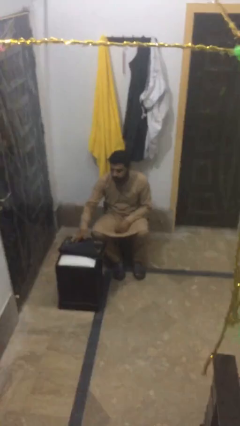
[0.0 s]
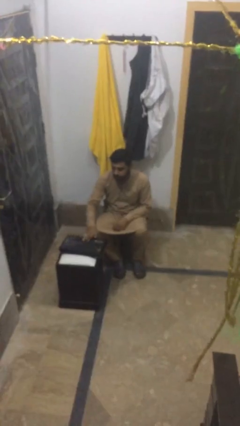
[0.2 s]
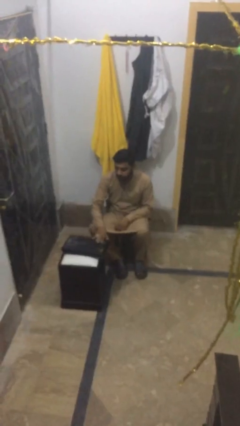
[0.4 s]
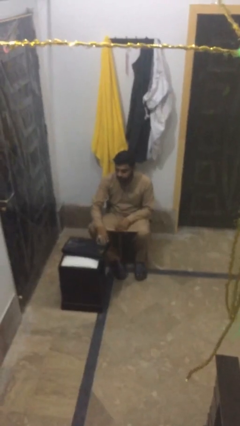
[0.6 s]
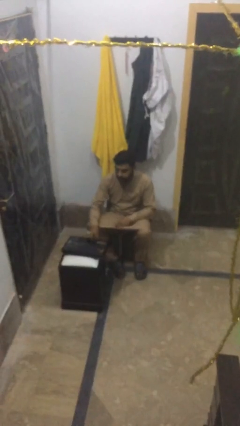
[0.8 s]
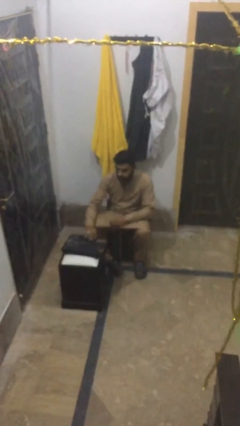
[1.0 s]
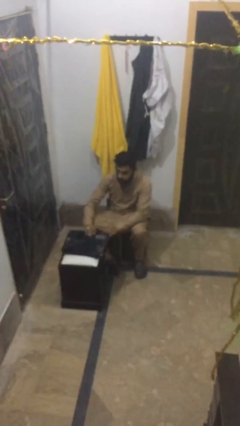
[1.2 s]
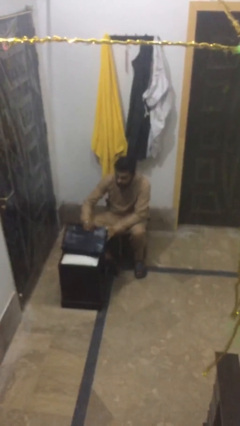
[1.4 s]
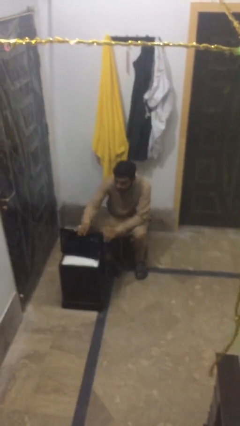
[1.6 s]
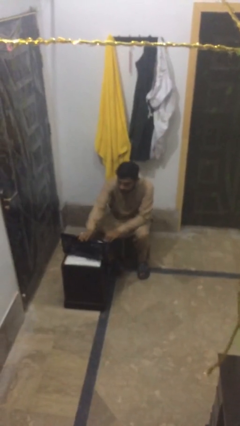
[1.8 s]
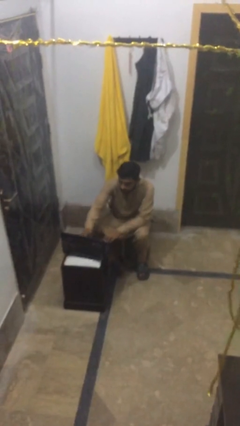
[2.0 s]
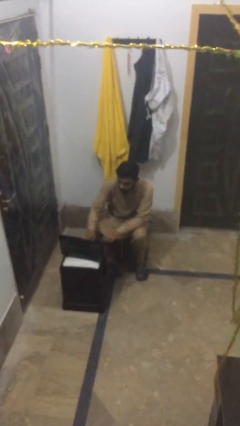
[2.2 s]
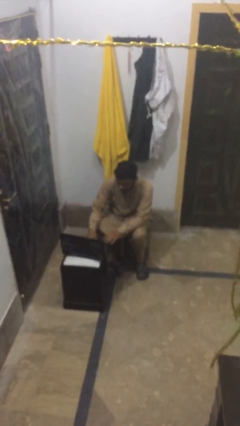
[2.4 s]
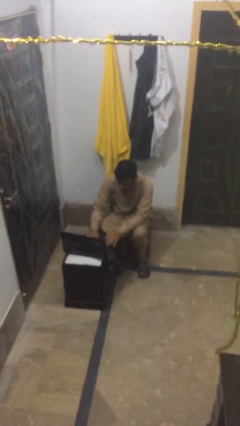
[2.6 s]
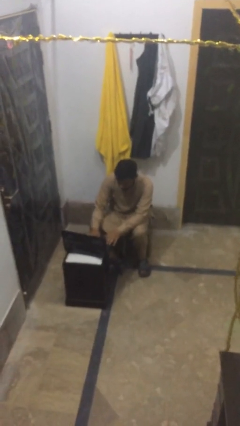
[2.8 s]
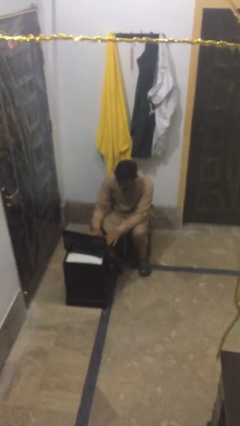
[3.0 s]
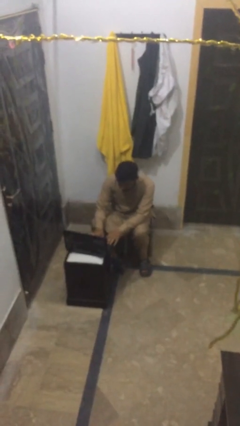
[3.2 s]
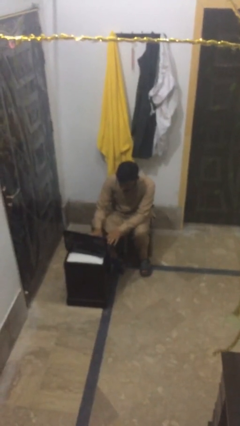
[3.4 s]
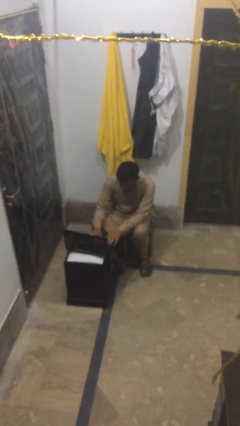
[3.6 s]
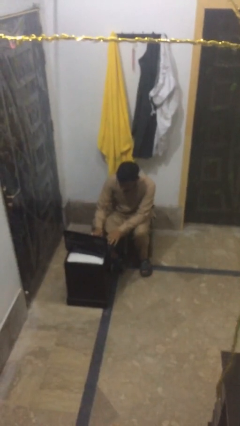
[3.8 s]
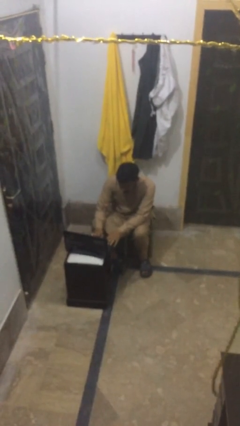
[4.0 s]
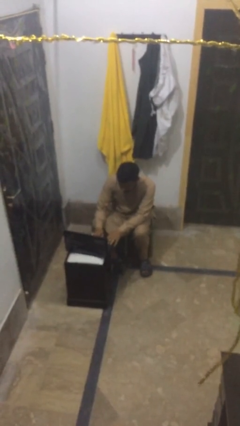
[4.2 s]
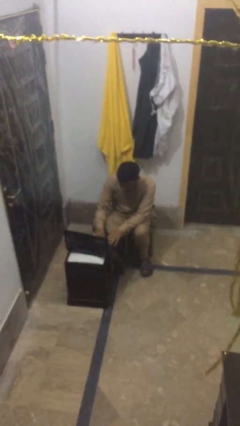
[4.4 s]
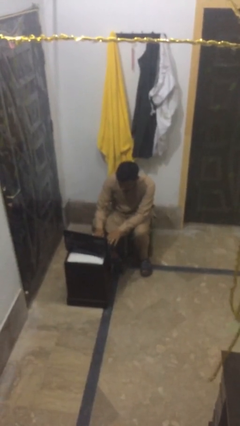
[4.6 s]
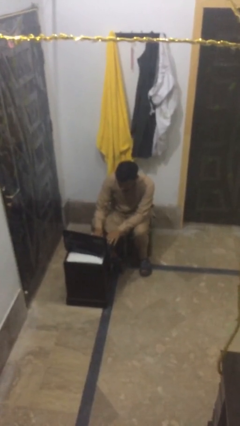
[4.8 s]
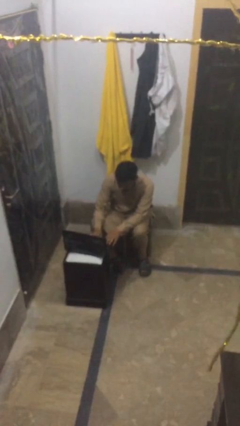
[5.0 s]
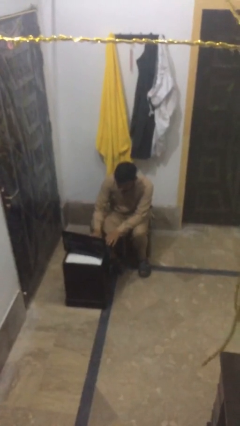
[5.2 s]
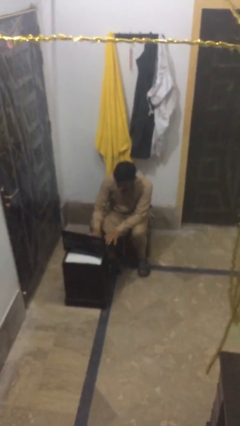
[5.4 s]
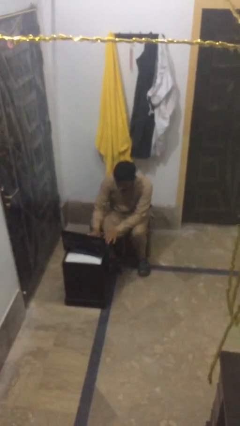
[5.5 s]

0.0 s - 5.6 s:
person interacts with laptop

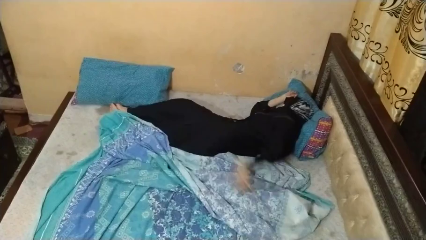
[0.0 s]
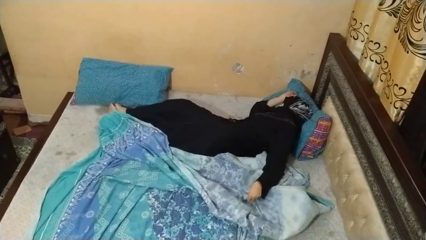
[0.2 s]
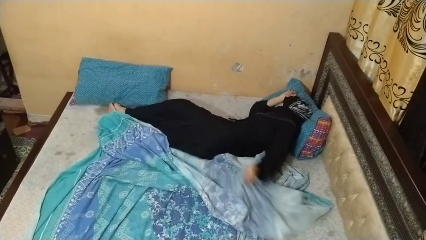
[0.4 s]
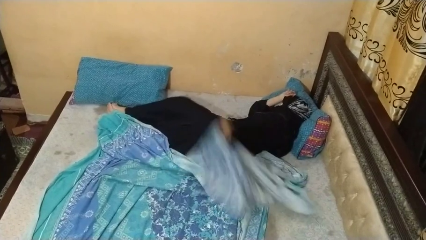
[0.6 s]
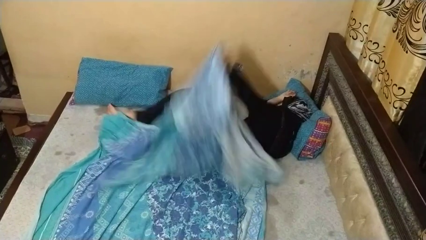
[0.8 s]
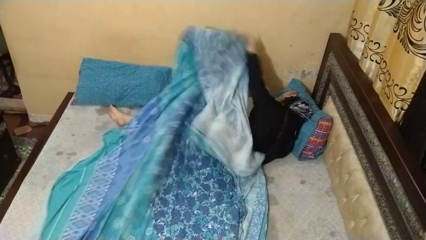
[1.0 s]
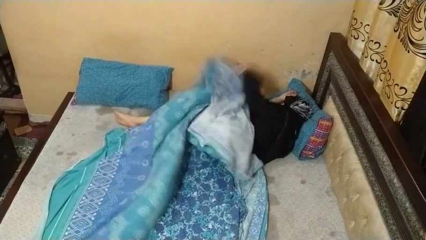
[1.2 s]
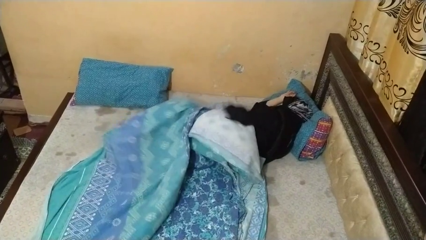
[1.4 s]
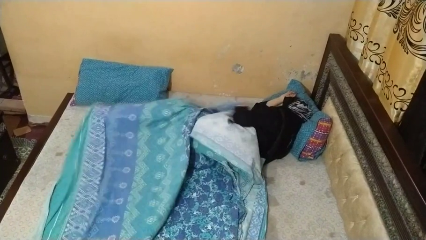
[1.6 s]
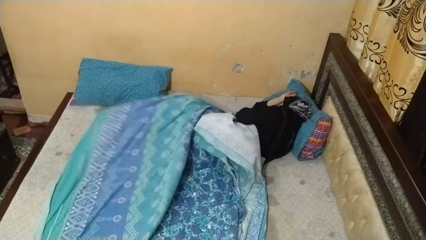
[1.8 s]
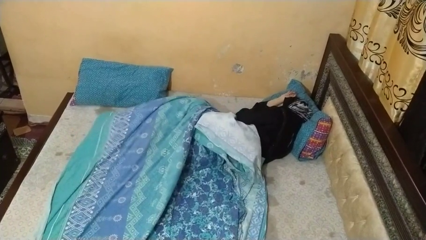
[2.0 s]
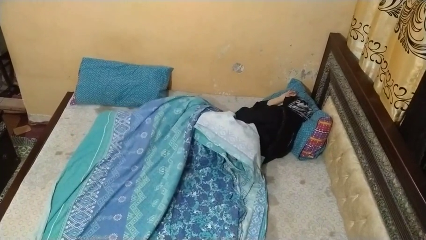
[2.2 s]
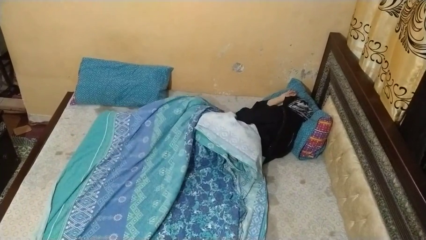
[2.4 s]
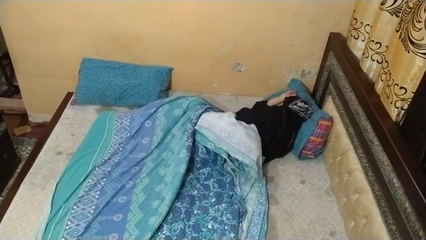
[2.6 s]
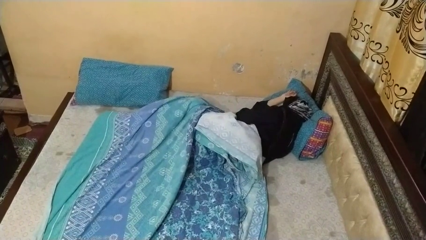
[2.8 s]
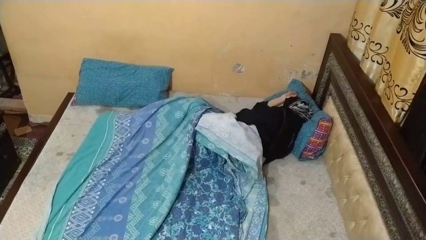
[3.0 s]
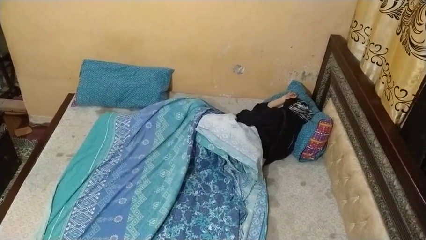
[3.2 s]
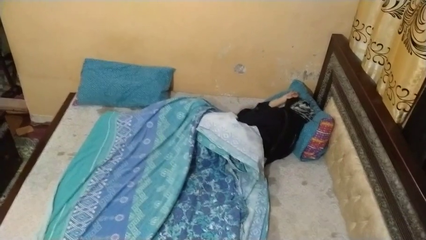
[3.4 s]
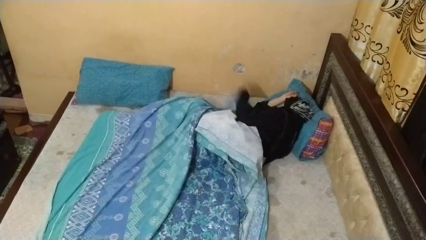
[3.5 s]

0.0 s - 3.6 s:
person covers with bedsheets

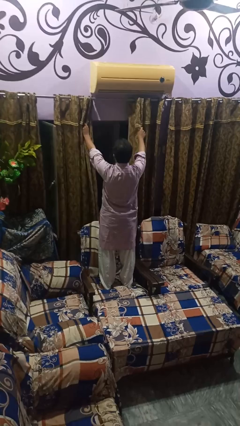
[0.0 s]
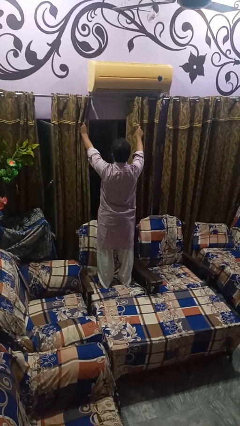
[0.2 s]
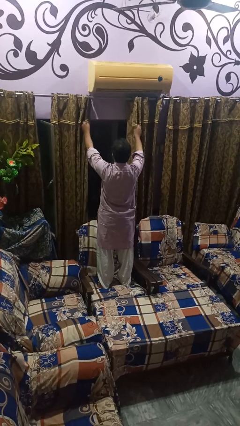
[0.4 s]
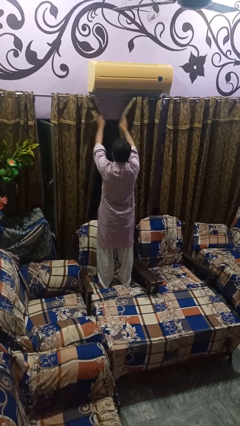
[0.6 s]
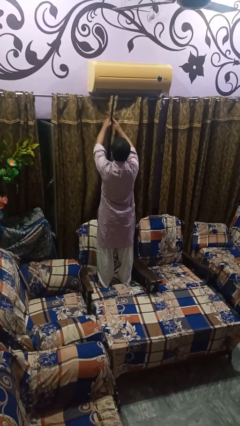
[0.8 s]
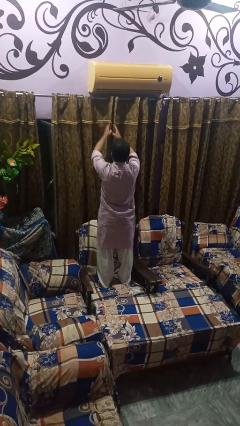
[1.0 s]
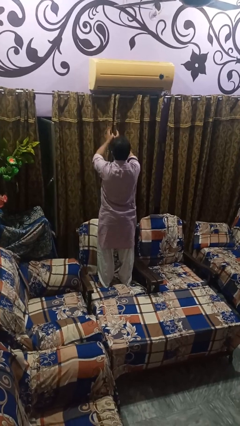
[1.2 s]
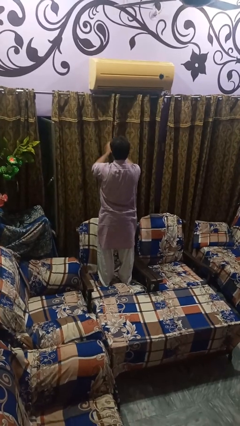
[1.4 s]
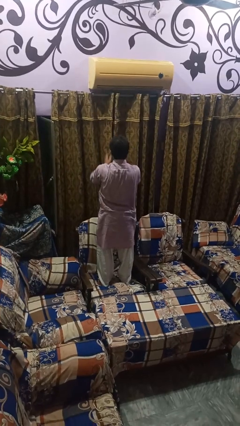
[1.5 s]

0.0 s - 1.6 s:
person closes curtains

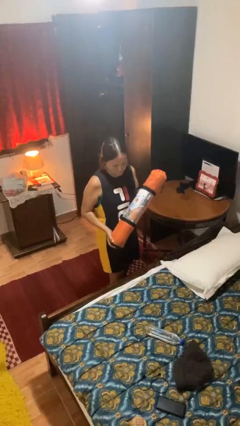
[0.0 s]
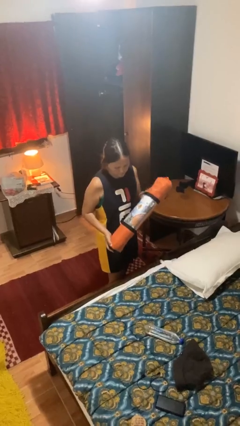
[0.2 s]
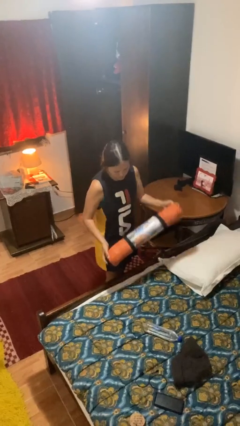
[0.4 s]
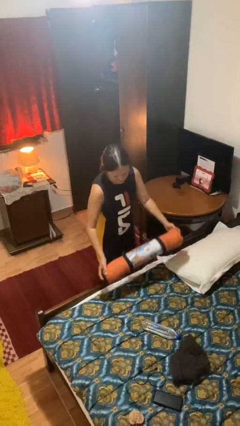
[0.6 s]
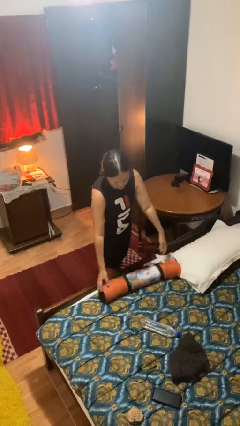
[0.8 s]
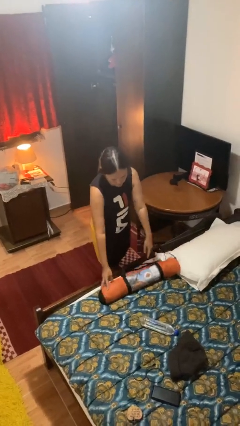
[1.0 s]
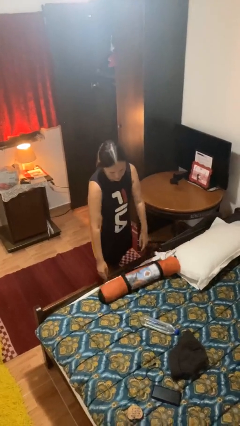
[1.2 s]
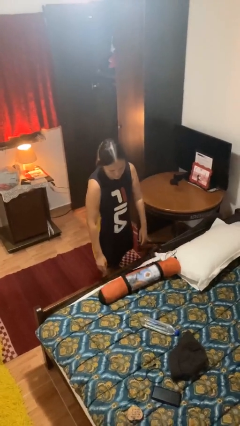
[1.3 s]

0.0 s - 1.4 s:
person puts down object on bed

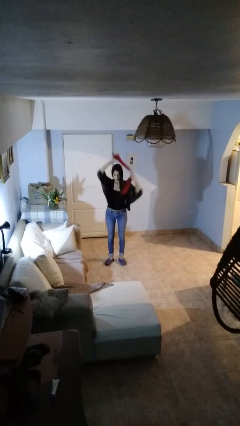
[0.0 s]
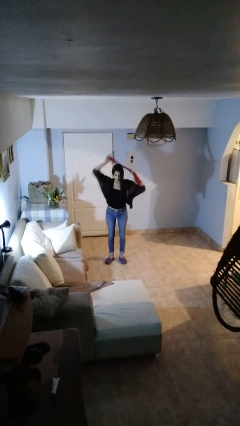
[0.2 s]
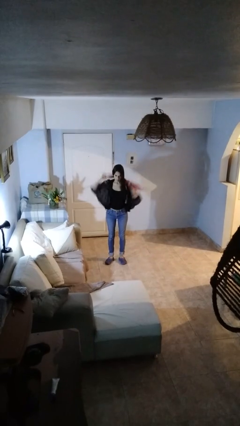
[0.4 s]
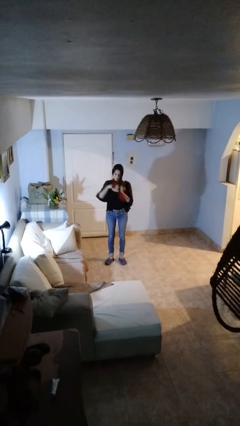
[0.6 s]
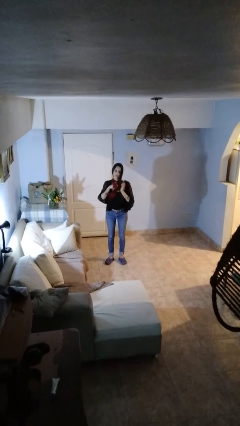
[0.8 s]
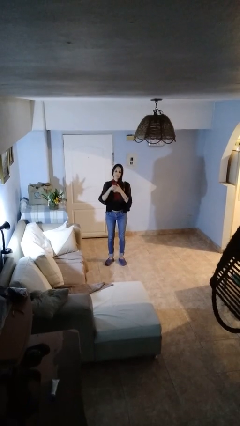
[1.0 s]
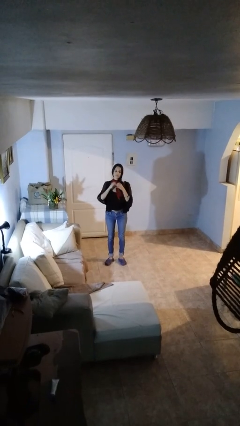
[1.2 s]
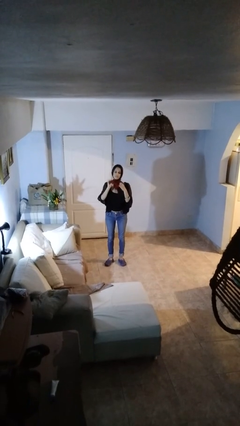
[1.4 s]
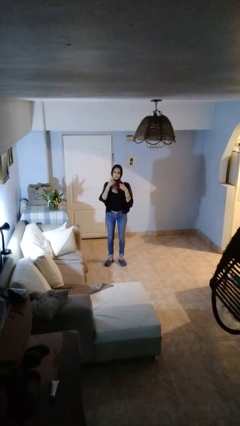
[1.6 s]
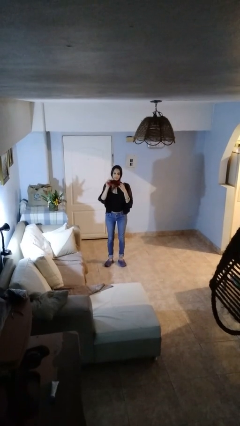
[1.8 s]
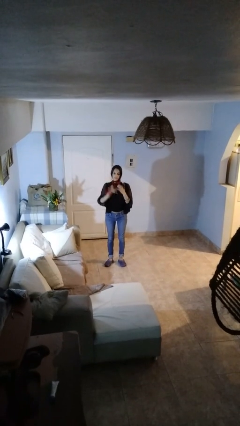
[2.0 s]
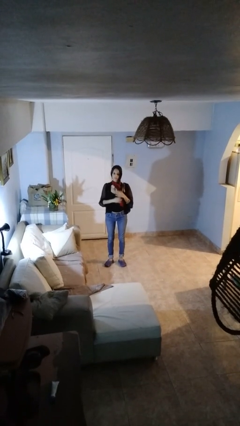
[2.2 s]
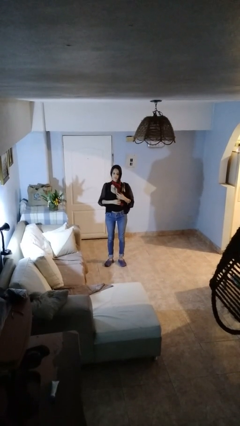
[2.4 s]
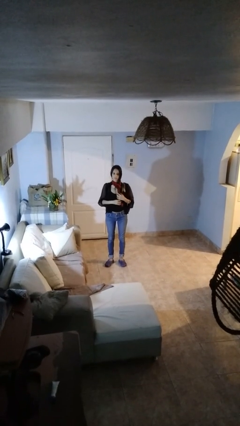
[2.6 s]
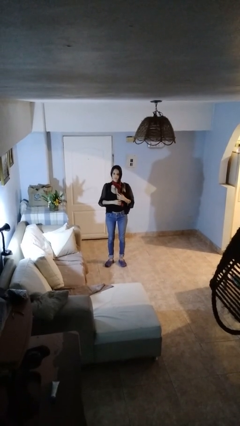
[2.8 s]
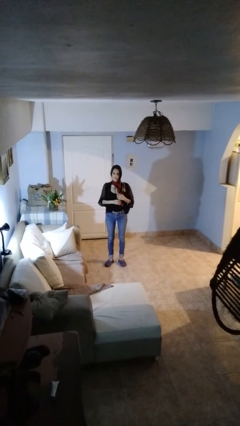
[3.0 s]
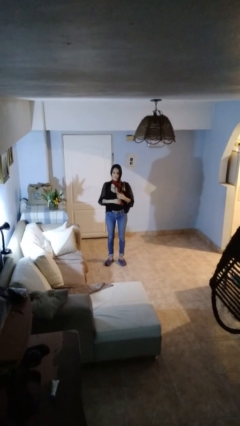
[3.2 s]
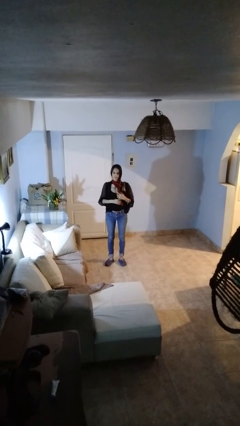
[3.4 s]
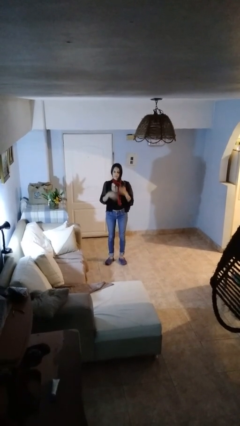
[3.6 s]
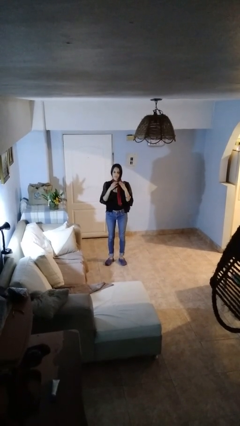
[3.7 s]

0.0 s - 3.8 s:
person puts on scarf

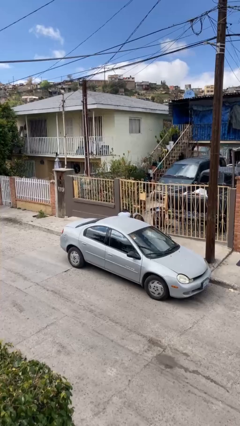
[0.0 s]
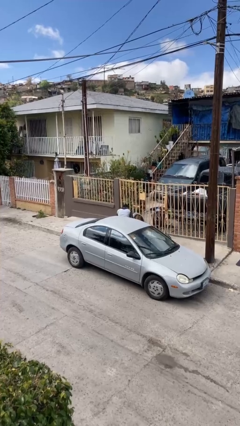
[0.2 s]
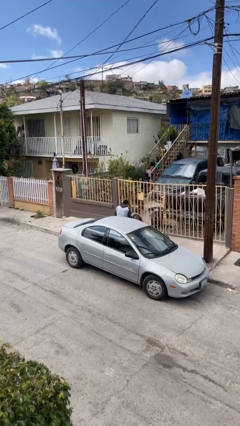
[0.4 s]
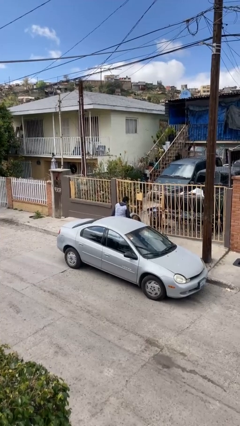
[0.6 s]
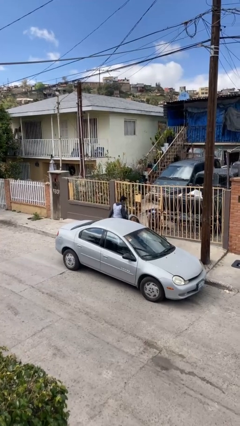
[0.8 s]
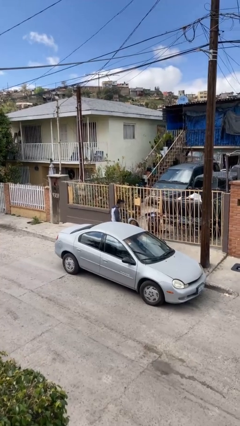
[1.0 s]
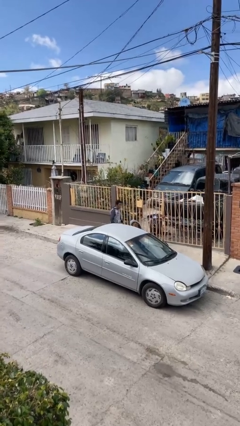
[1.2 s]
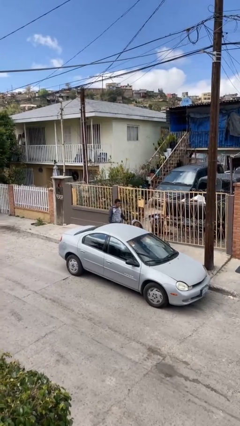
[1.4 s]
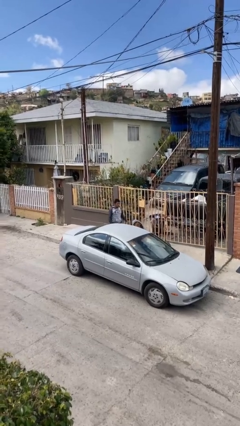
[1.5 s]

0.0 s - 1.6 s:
person exits car
